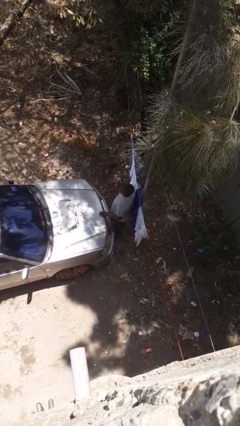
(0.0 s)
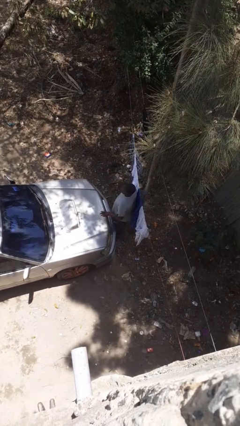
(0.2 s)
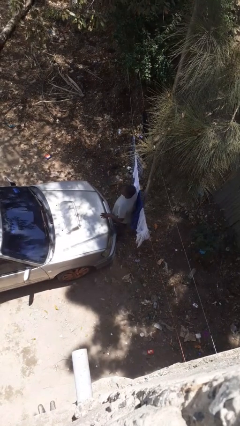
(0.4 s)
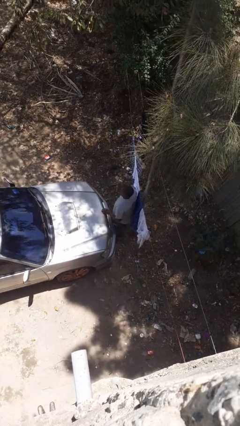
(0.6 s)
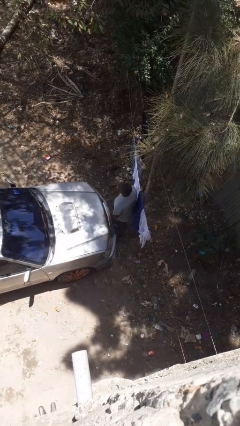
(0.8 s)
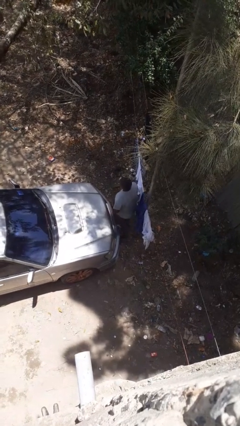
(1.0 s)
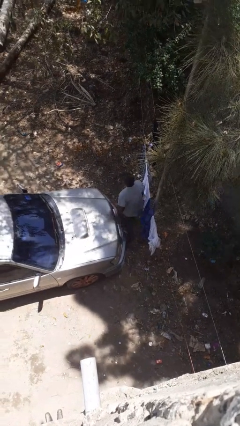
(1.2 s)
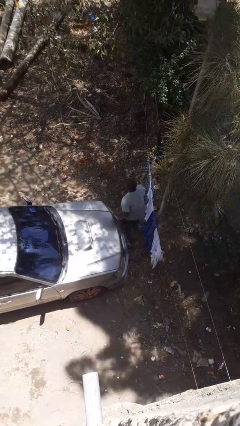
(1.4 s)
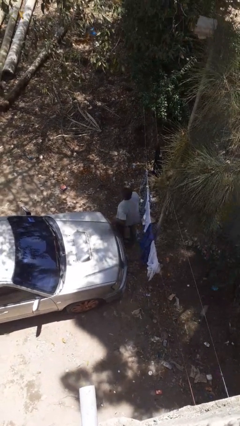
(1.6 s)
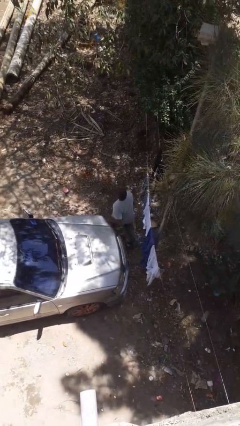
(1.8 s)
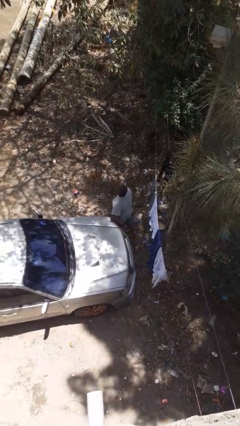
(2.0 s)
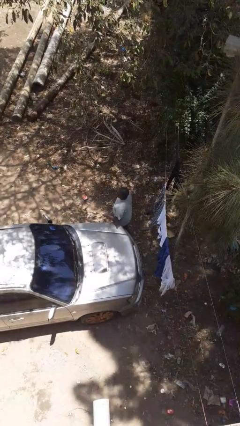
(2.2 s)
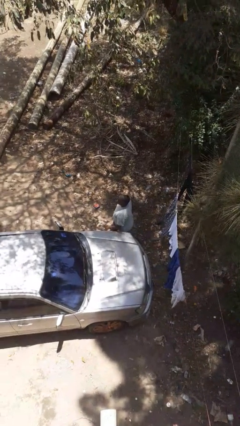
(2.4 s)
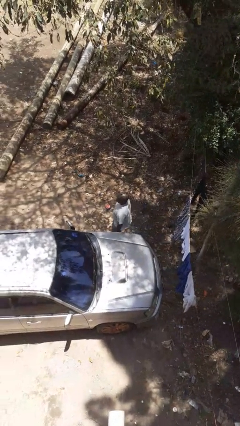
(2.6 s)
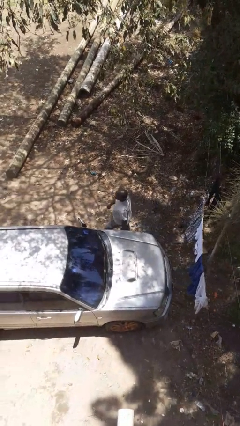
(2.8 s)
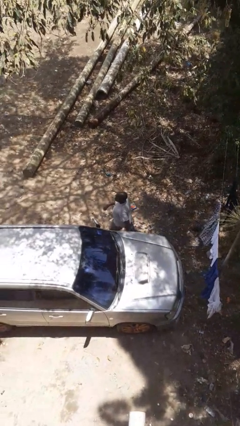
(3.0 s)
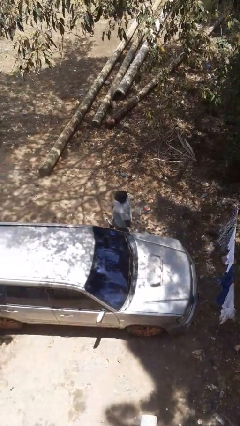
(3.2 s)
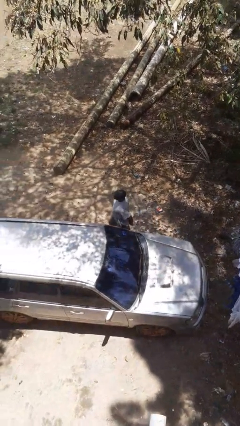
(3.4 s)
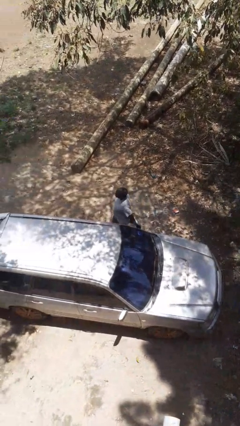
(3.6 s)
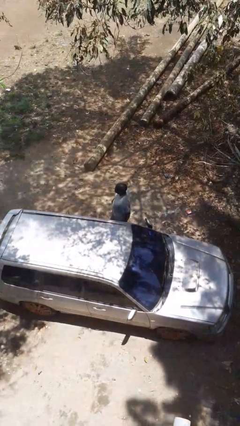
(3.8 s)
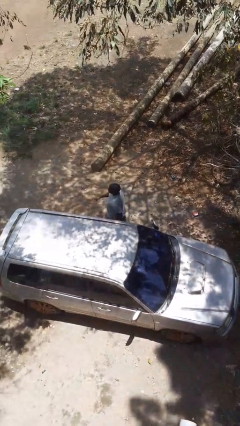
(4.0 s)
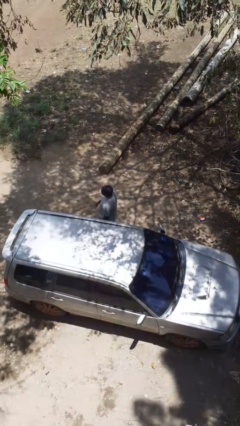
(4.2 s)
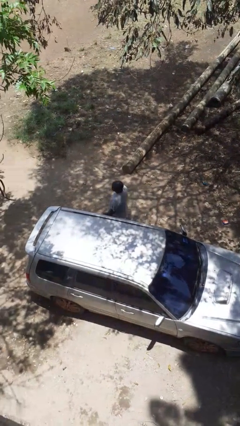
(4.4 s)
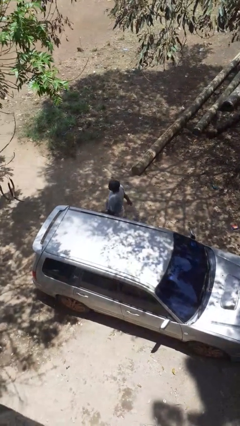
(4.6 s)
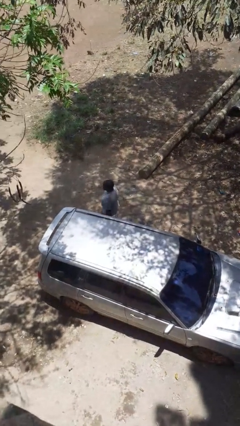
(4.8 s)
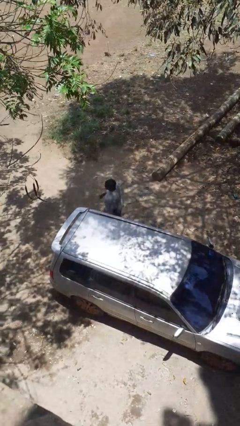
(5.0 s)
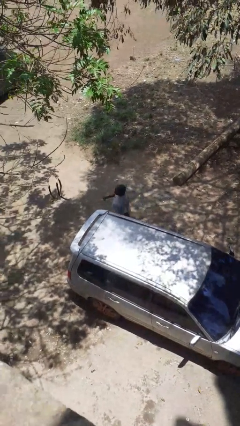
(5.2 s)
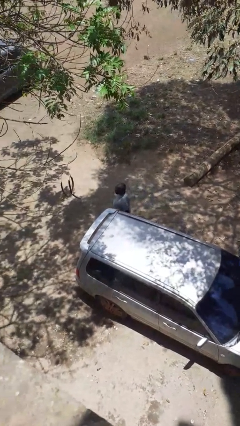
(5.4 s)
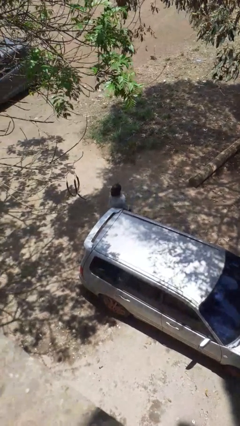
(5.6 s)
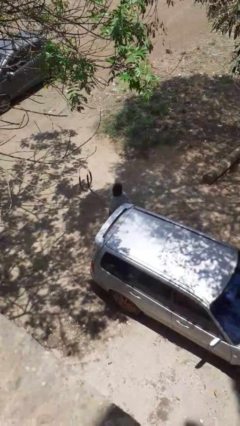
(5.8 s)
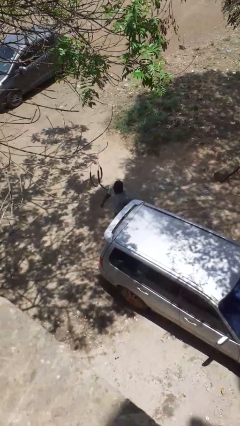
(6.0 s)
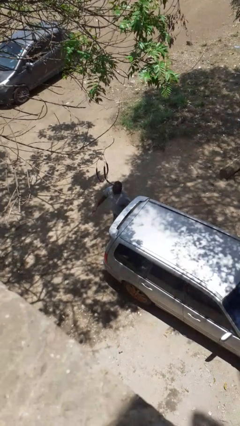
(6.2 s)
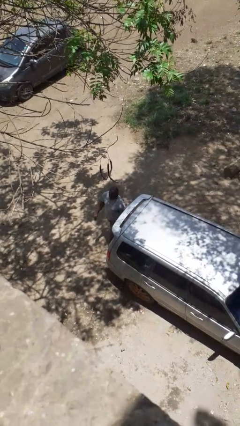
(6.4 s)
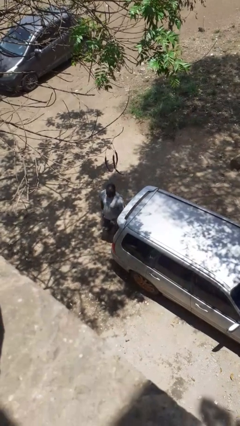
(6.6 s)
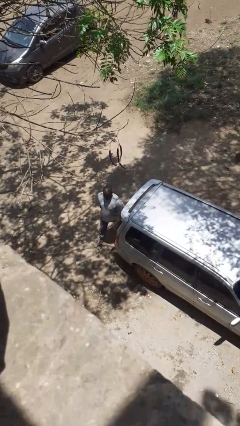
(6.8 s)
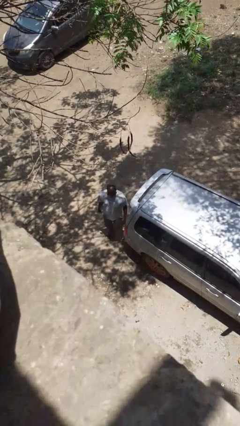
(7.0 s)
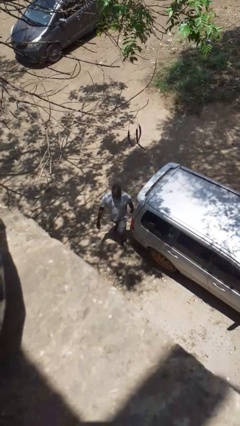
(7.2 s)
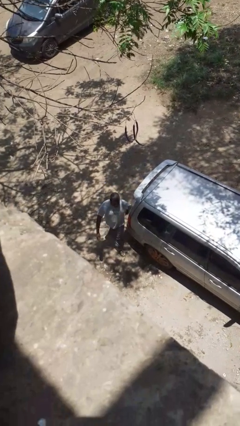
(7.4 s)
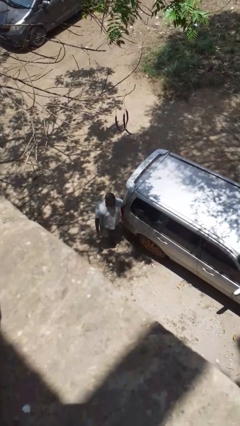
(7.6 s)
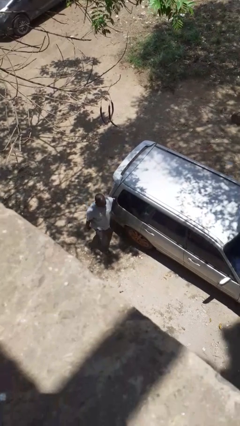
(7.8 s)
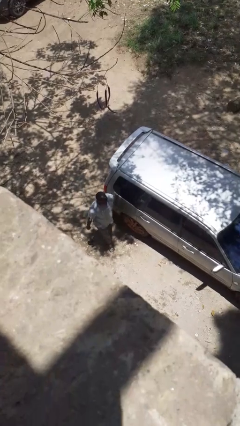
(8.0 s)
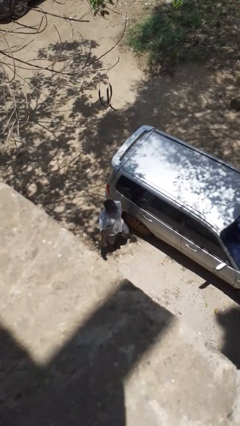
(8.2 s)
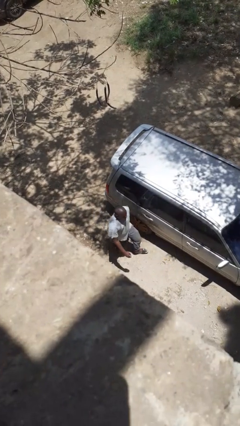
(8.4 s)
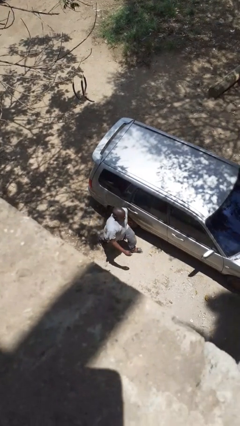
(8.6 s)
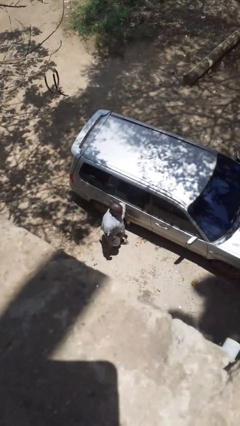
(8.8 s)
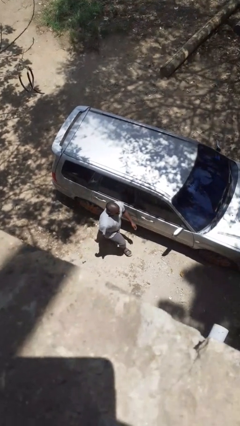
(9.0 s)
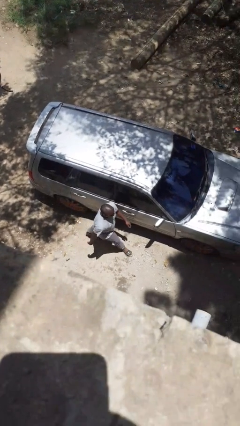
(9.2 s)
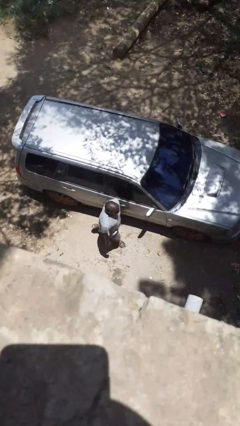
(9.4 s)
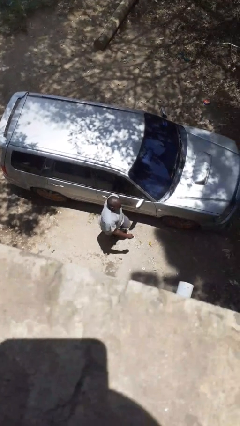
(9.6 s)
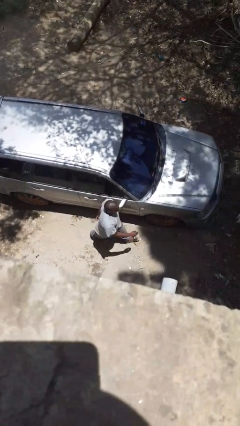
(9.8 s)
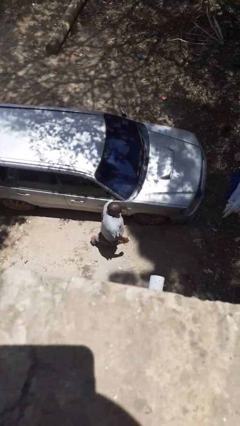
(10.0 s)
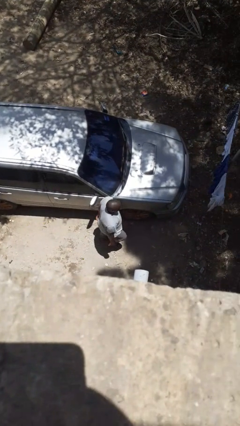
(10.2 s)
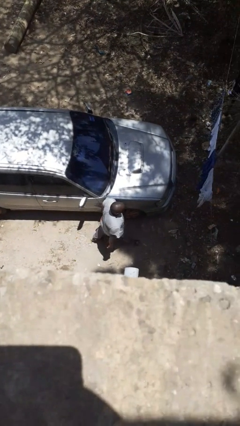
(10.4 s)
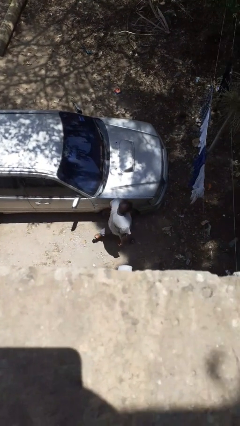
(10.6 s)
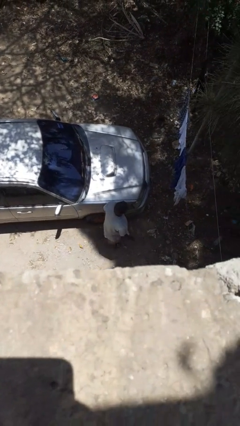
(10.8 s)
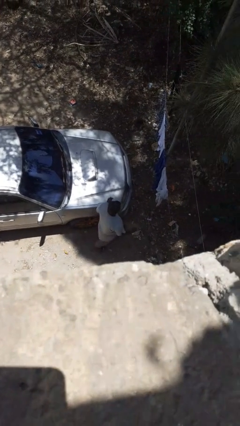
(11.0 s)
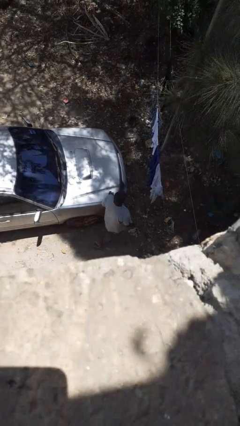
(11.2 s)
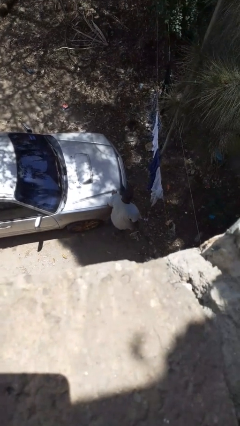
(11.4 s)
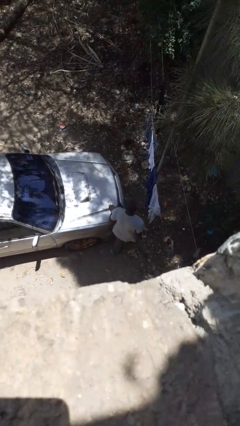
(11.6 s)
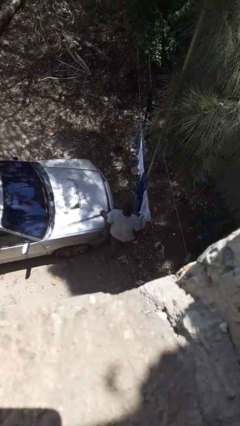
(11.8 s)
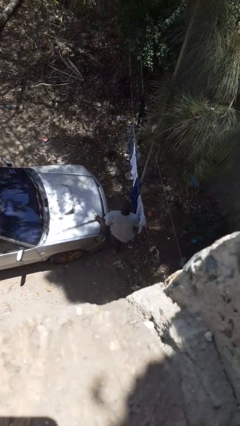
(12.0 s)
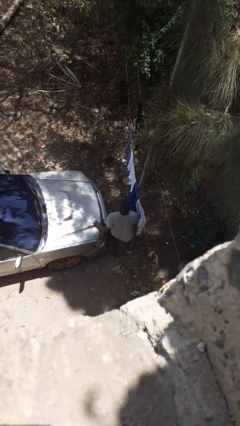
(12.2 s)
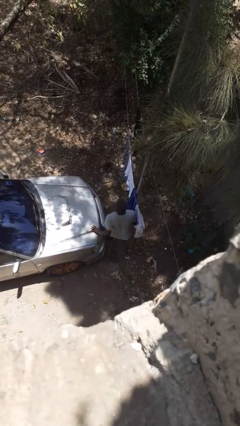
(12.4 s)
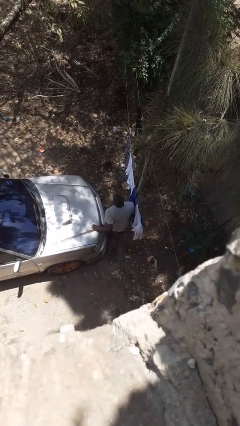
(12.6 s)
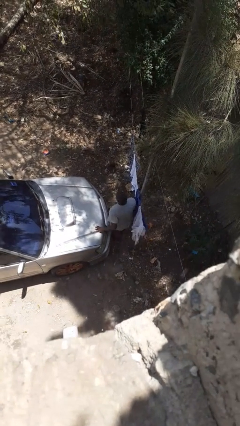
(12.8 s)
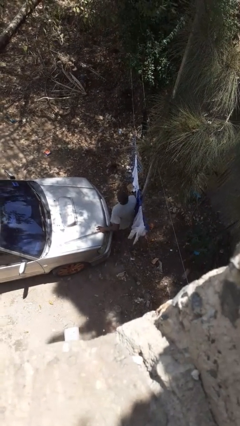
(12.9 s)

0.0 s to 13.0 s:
person walks around car

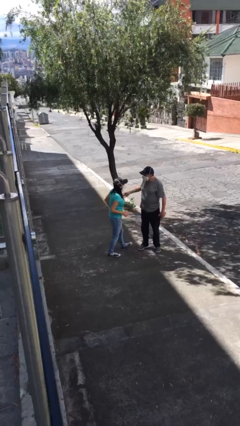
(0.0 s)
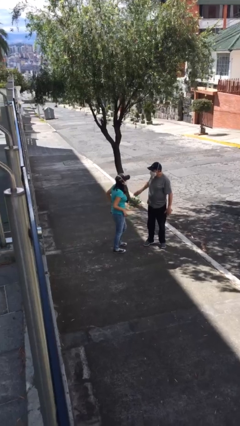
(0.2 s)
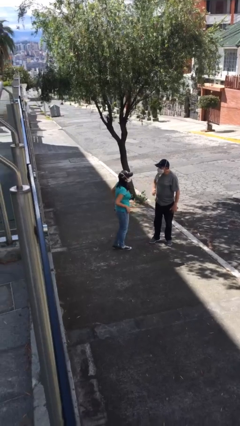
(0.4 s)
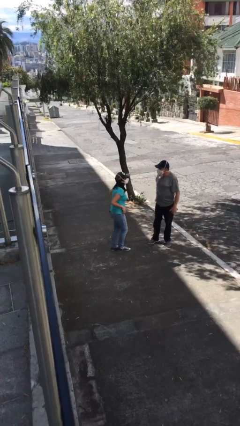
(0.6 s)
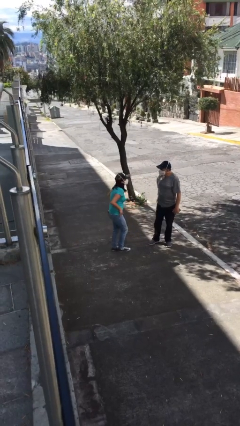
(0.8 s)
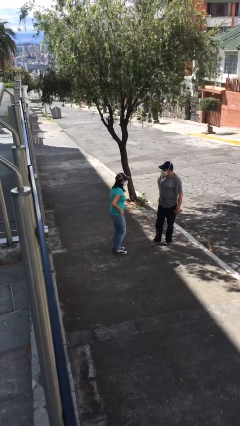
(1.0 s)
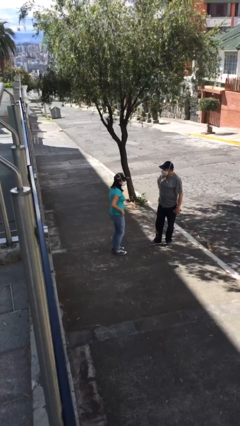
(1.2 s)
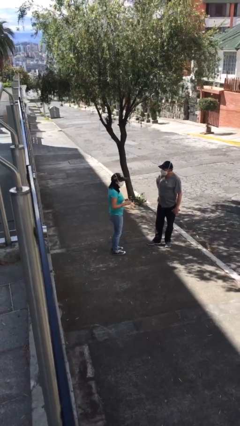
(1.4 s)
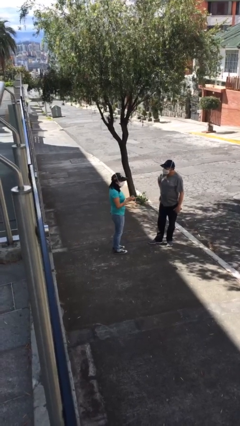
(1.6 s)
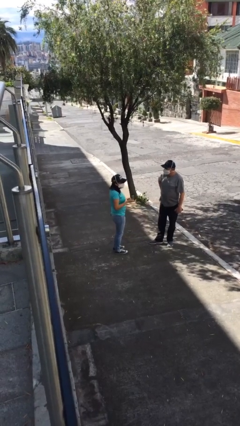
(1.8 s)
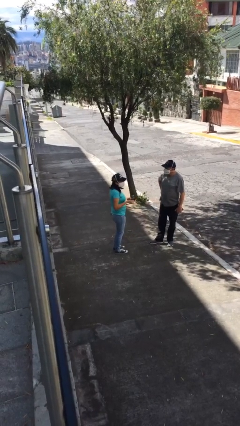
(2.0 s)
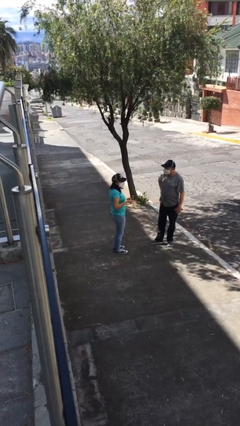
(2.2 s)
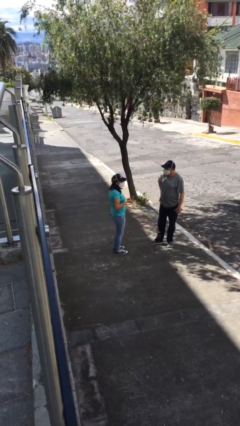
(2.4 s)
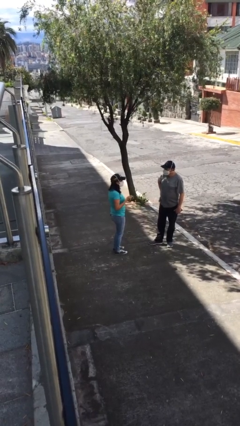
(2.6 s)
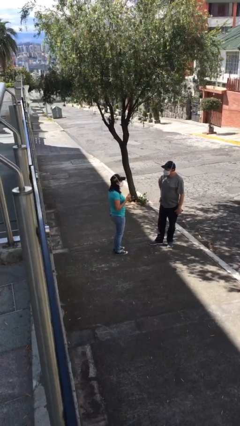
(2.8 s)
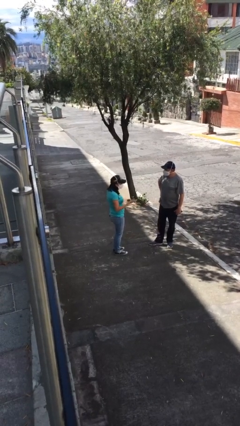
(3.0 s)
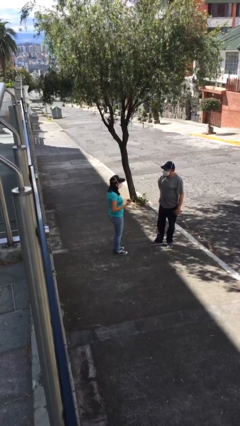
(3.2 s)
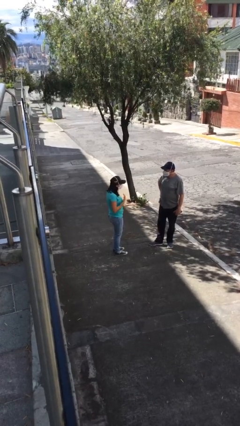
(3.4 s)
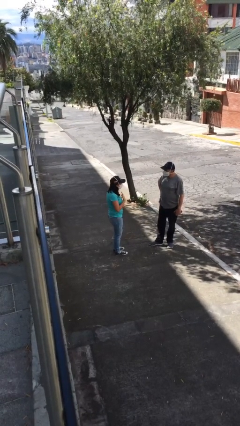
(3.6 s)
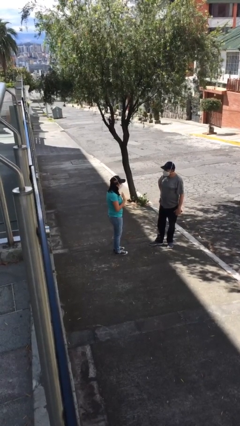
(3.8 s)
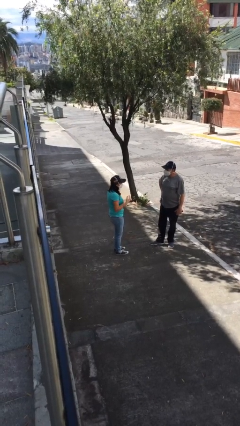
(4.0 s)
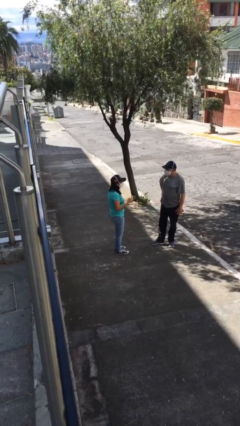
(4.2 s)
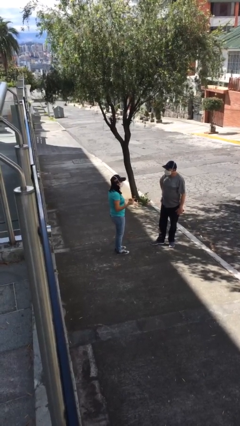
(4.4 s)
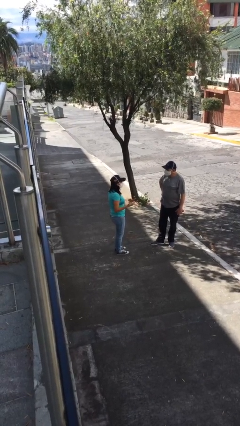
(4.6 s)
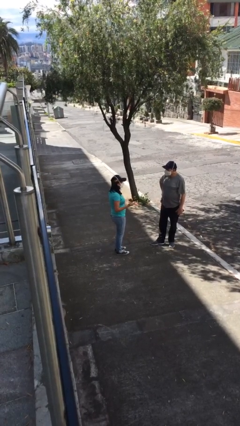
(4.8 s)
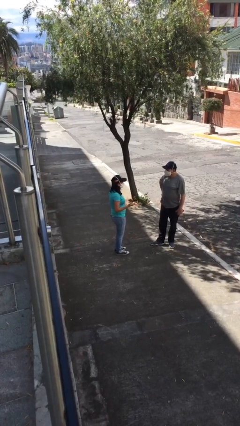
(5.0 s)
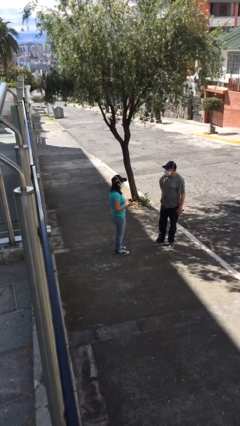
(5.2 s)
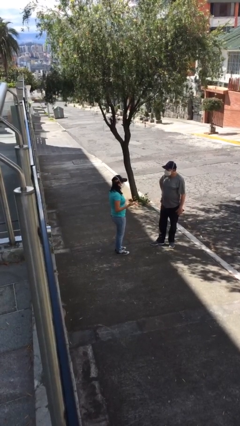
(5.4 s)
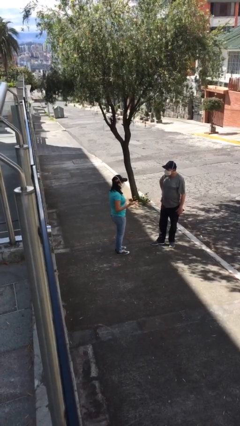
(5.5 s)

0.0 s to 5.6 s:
person talks to person
